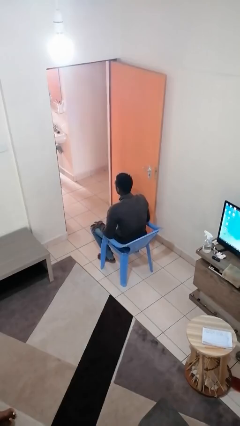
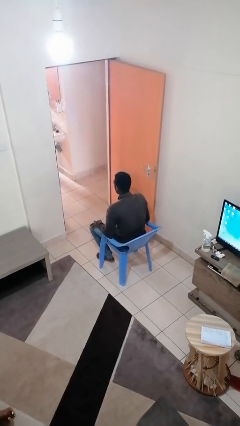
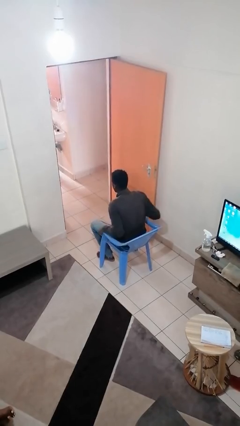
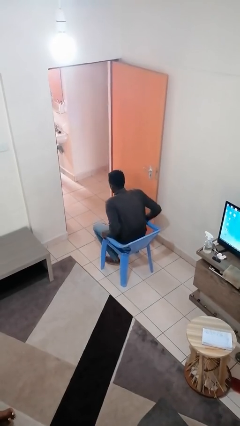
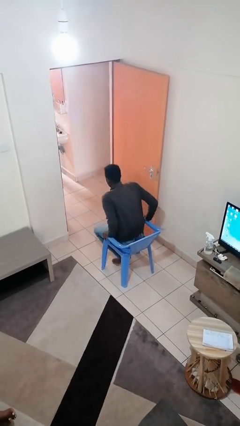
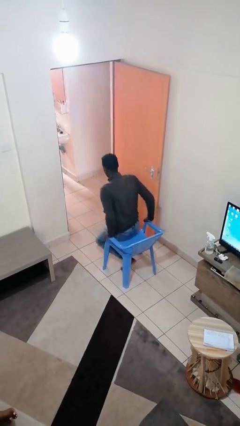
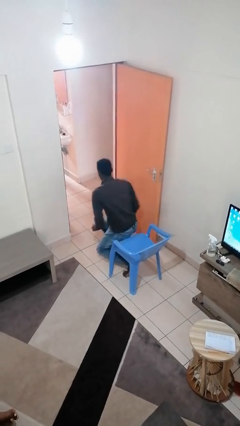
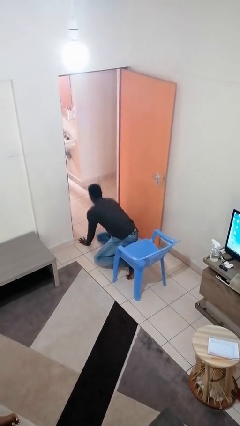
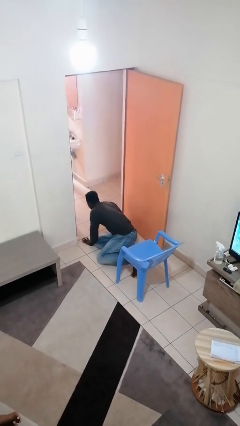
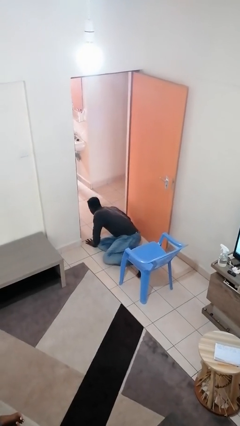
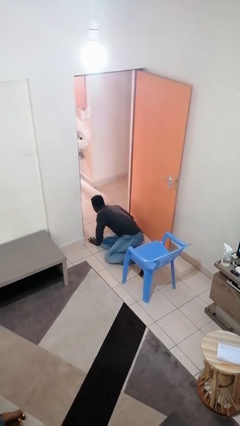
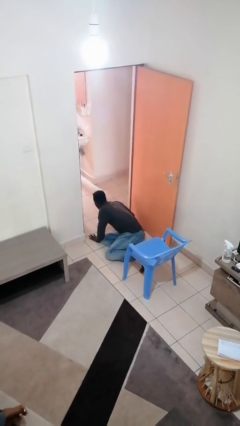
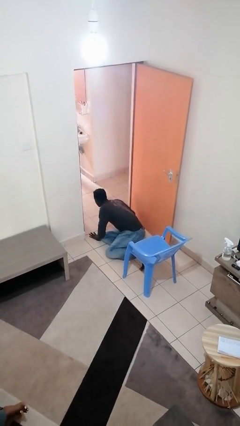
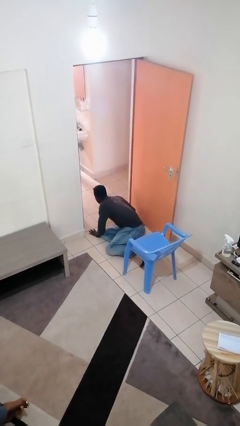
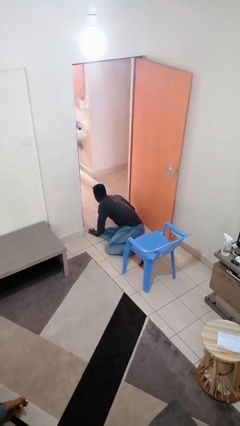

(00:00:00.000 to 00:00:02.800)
person falls from chair

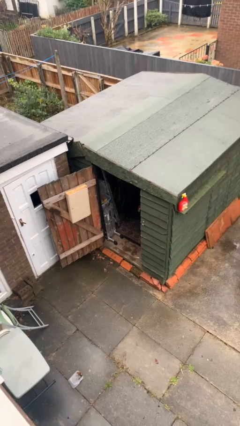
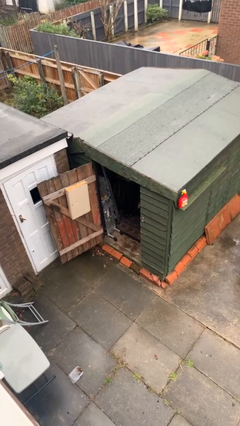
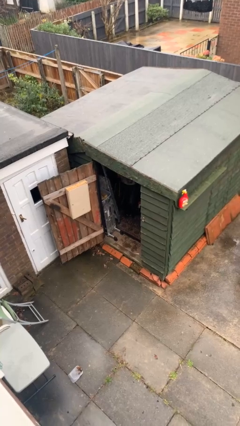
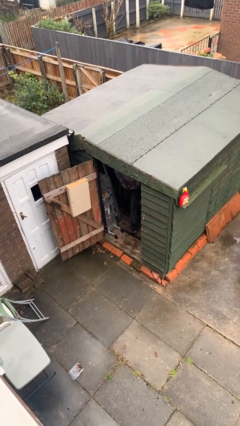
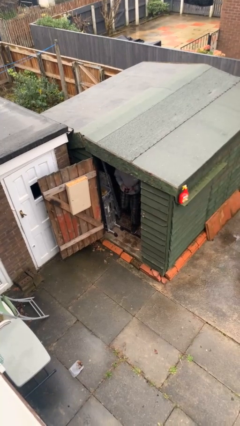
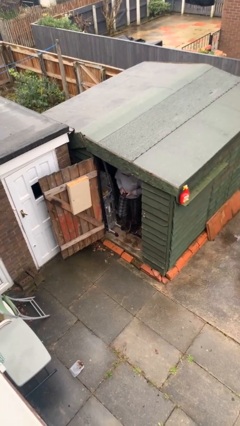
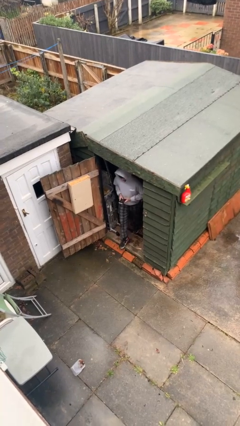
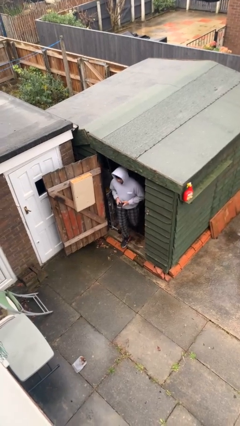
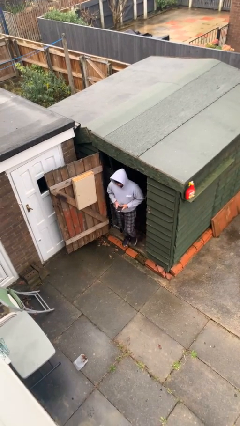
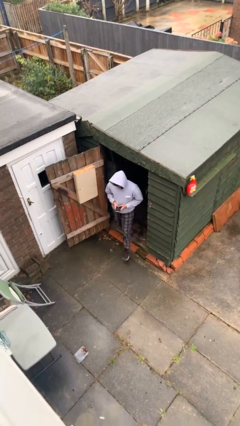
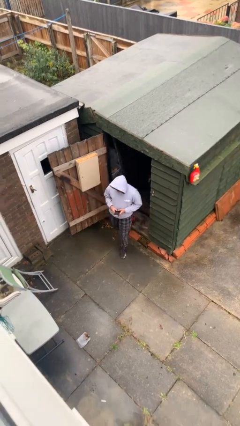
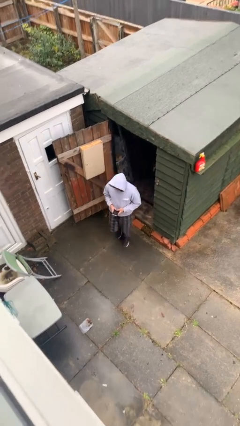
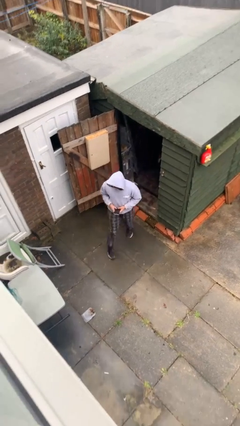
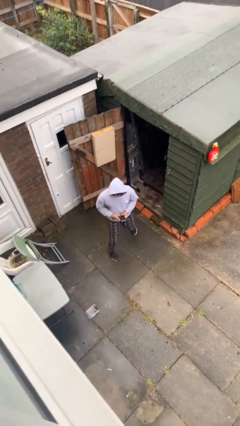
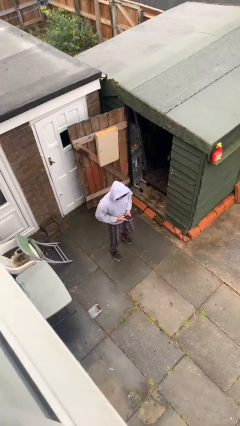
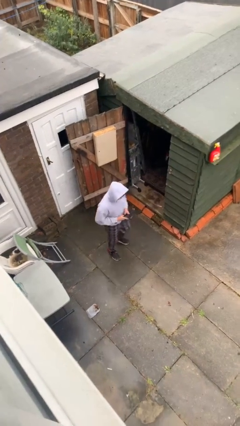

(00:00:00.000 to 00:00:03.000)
person enters scene through structure

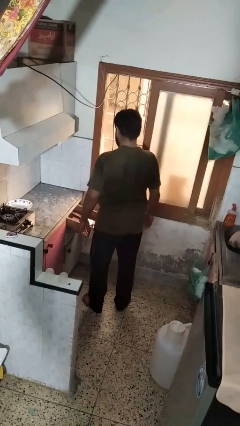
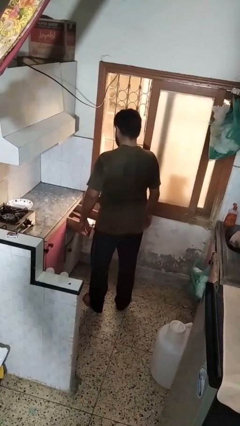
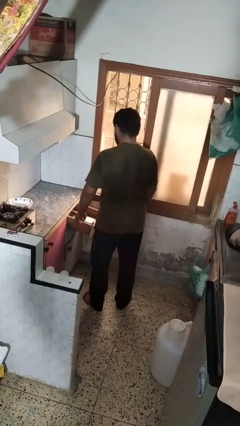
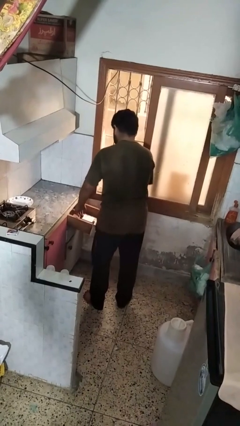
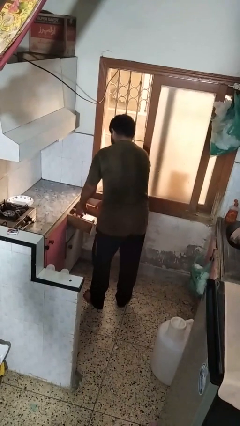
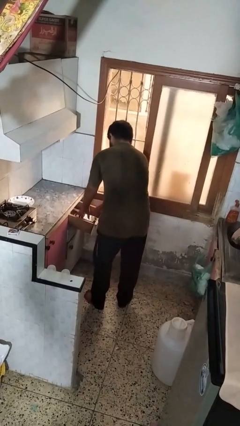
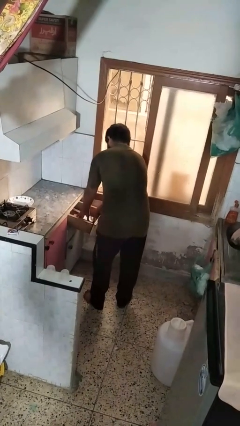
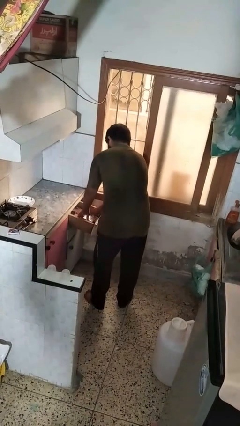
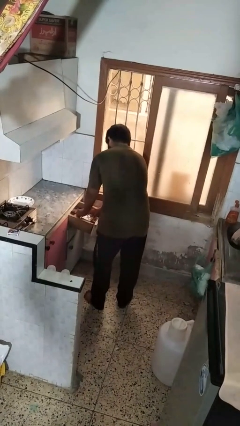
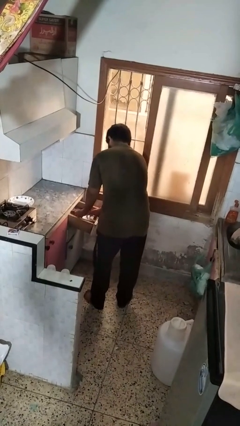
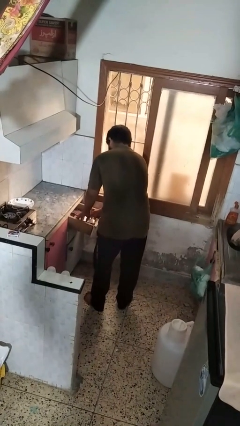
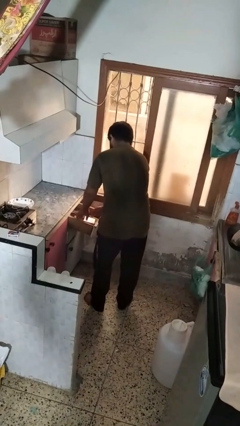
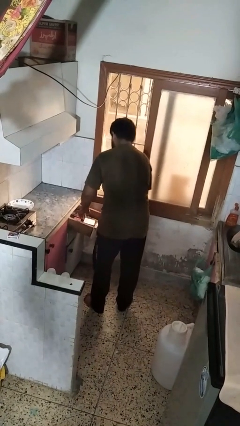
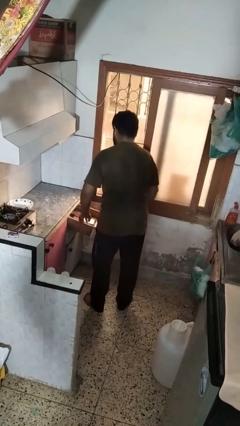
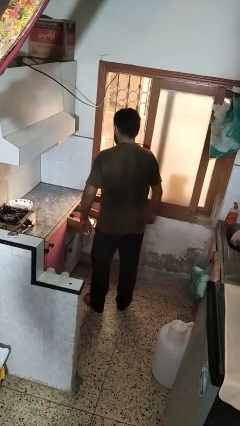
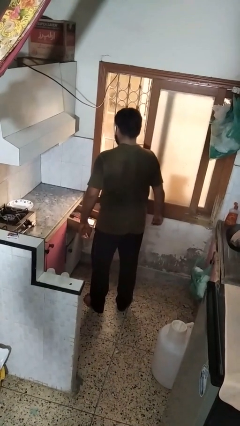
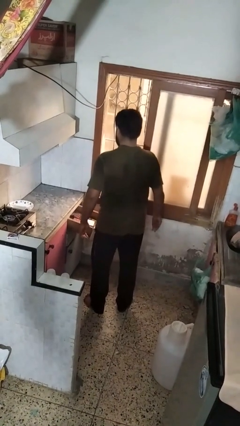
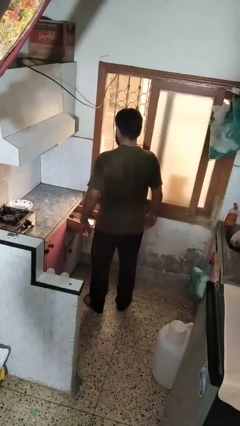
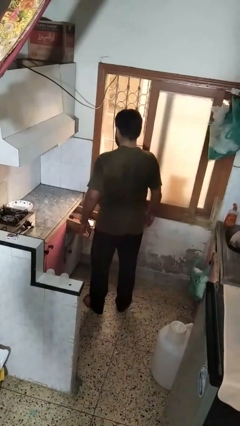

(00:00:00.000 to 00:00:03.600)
person searches in kitchen drawer

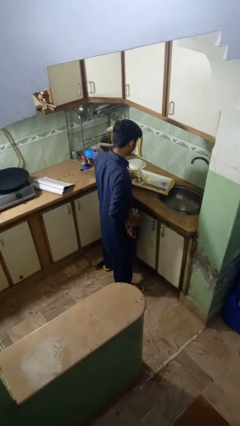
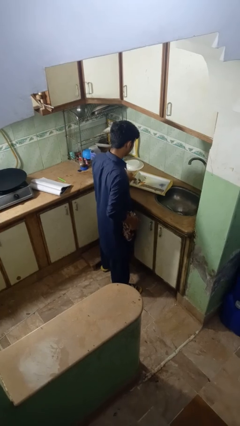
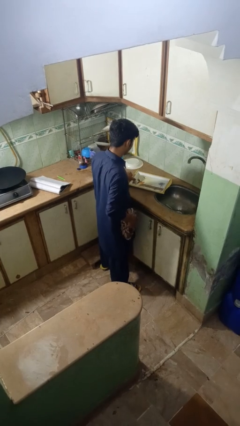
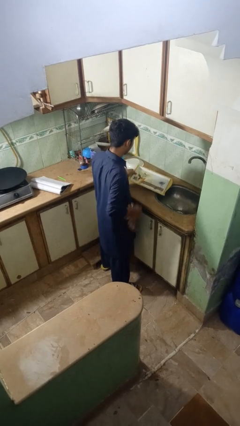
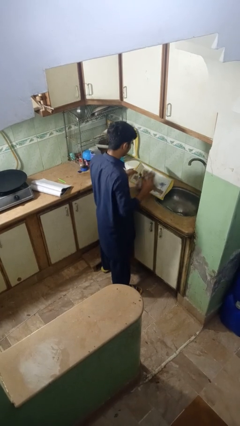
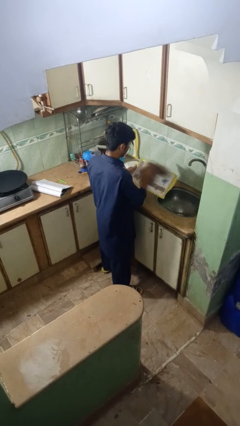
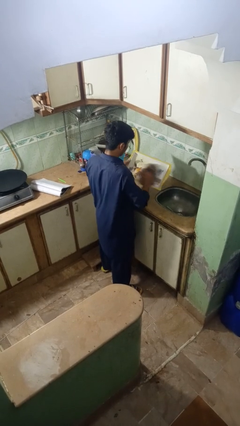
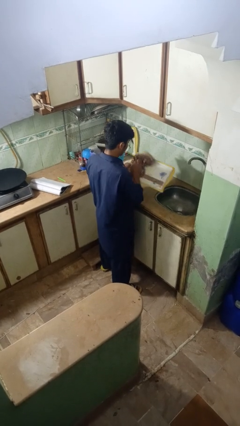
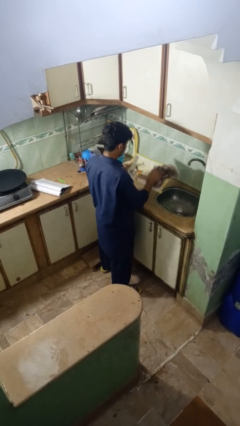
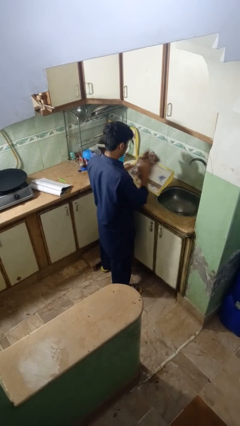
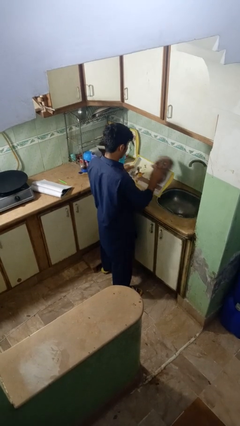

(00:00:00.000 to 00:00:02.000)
person dries dish

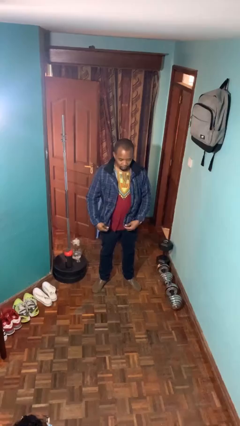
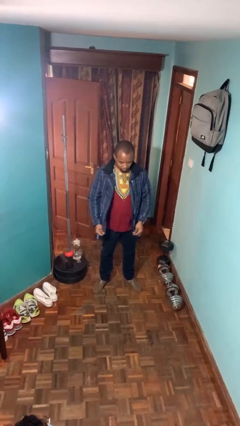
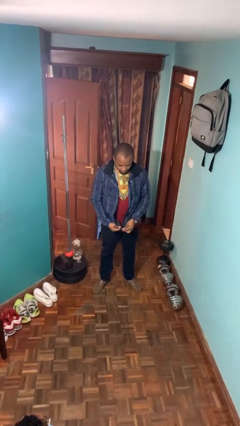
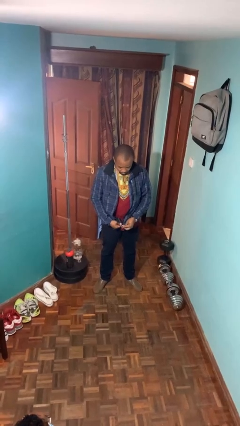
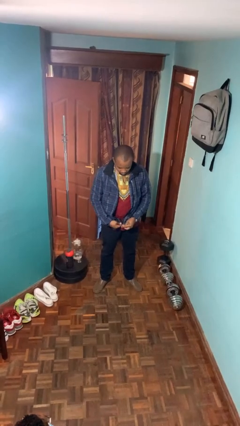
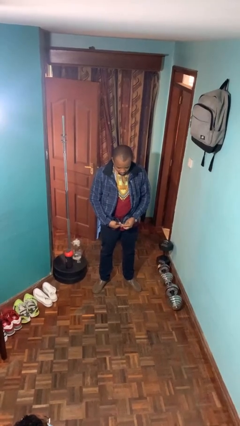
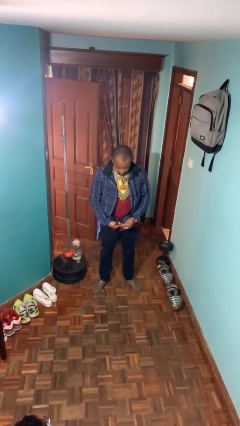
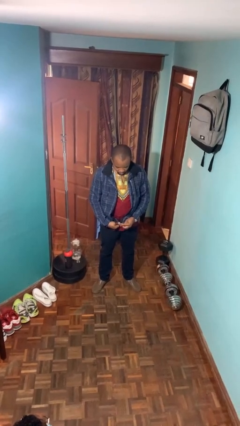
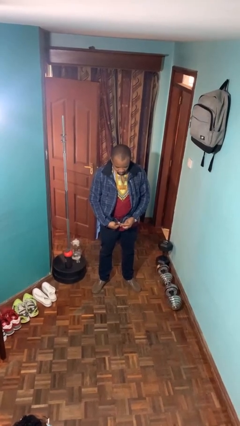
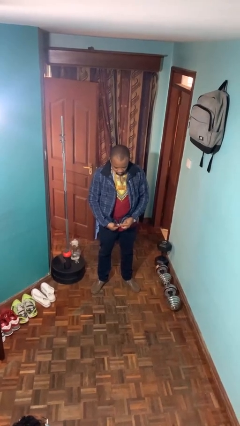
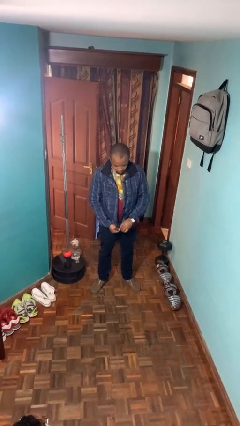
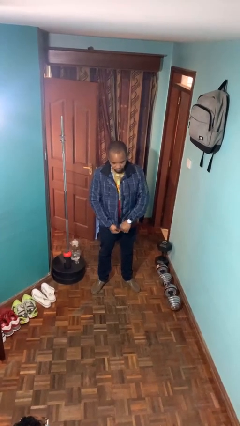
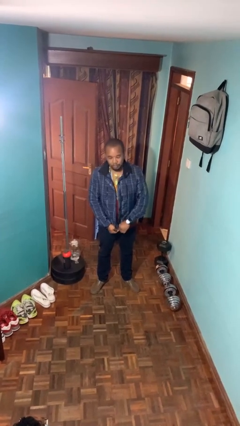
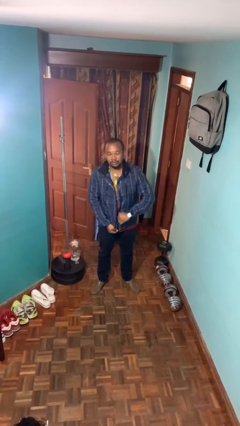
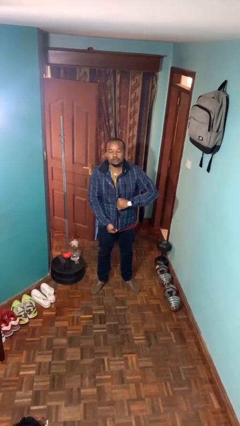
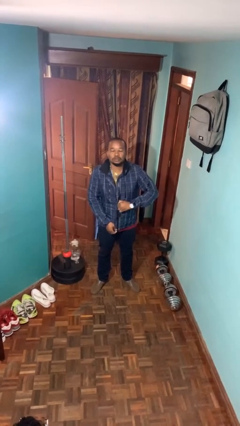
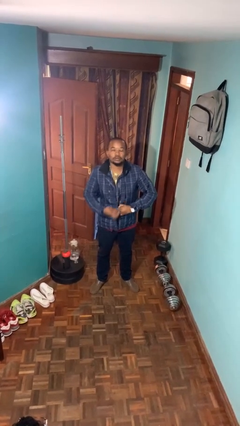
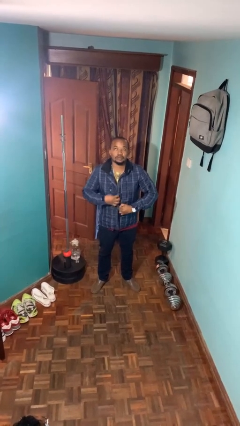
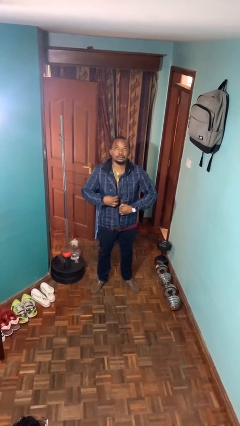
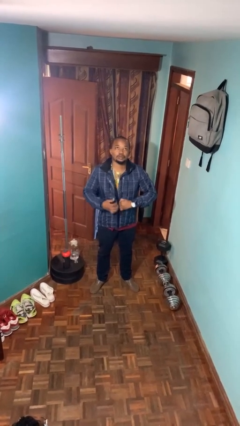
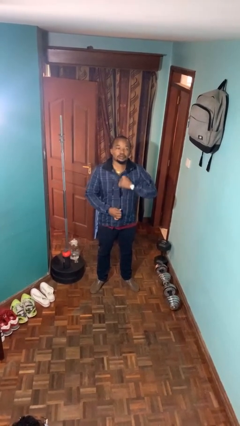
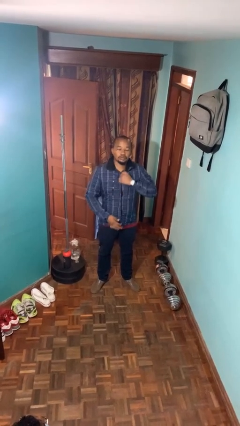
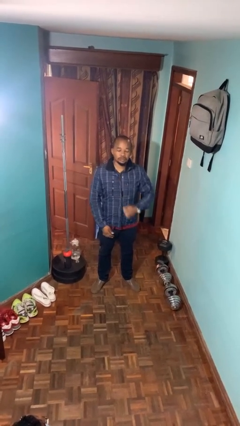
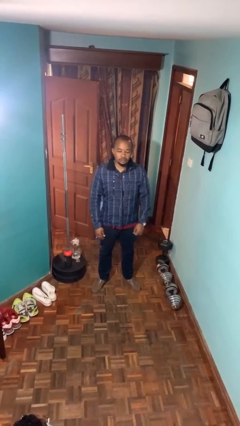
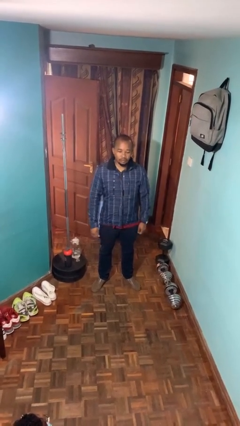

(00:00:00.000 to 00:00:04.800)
person zips up jacket

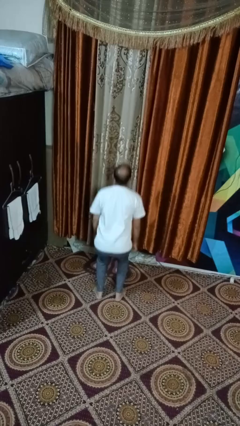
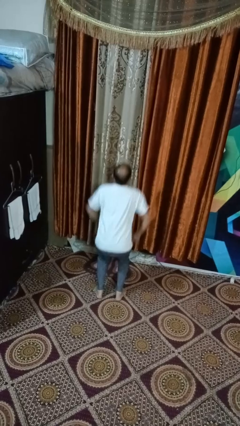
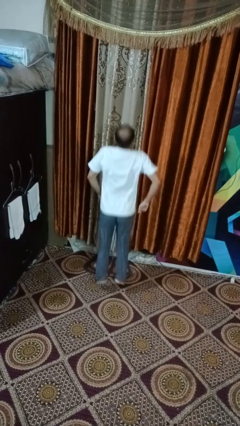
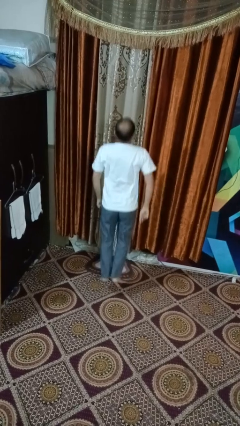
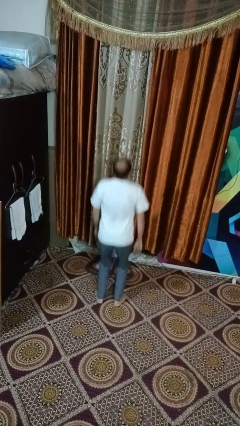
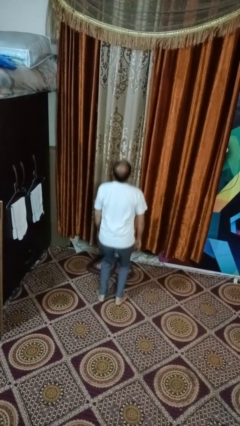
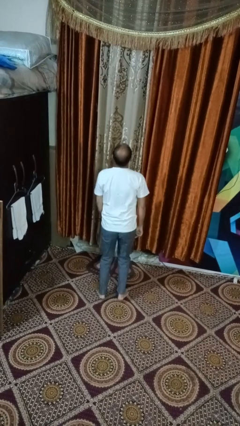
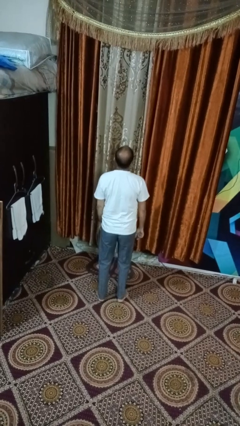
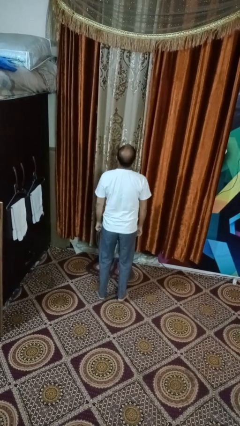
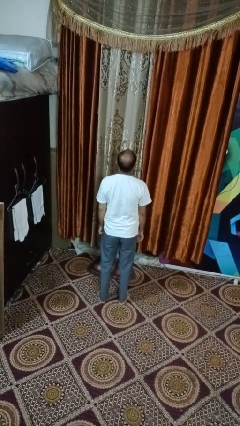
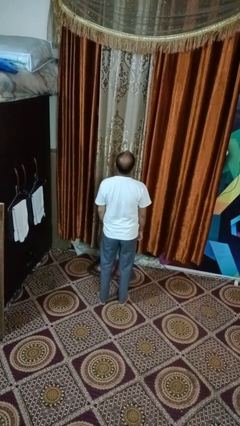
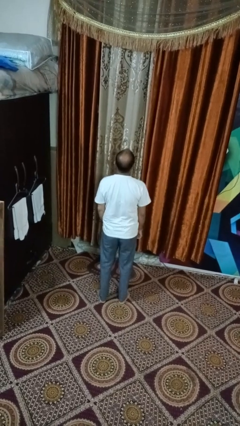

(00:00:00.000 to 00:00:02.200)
person jumps
